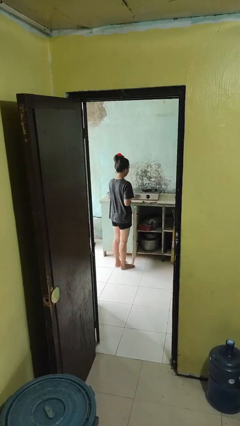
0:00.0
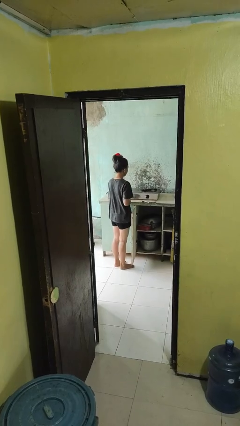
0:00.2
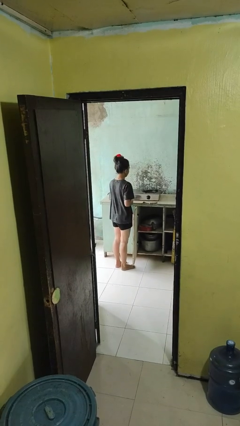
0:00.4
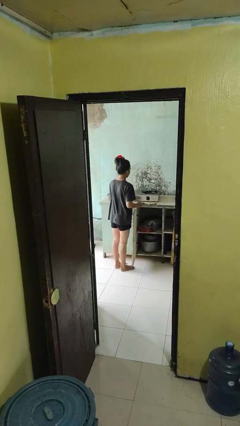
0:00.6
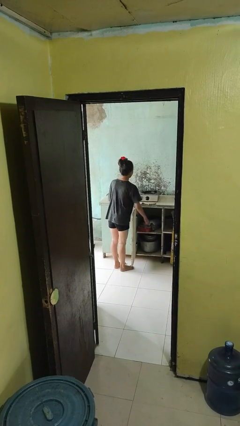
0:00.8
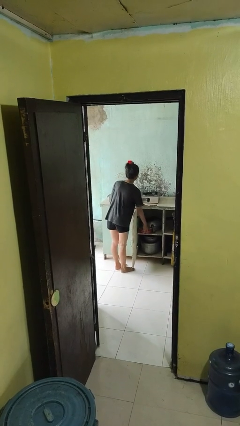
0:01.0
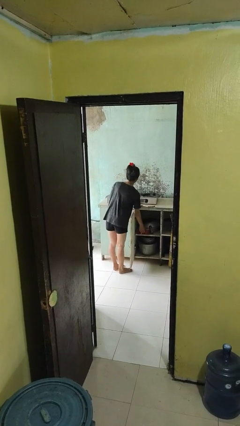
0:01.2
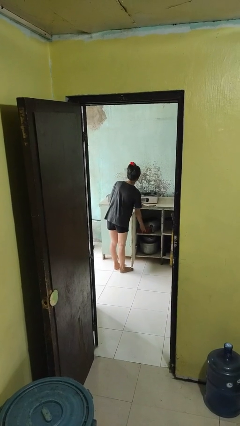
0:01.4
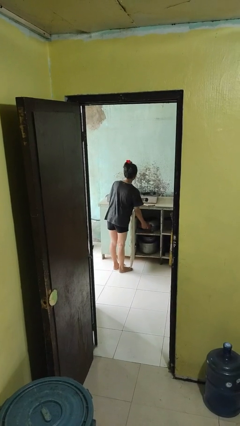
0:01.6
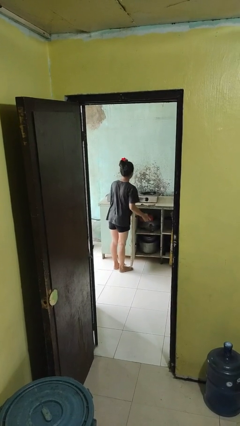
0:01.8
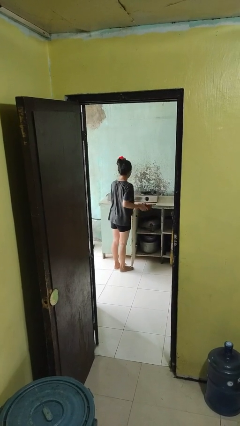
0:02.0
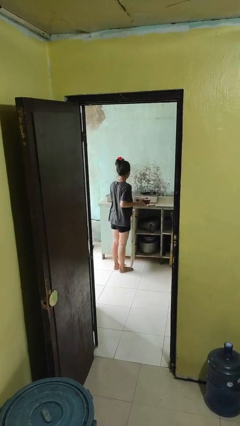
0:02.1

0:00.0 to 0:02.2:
person takes object from cabinet

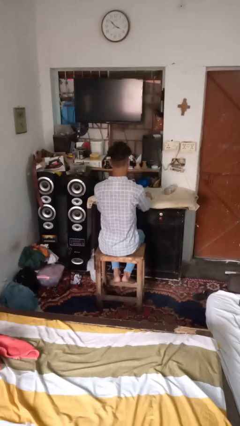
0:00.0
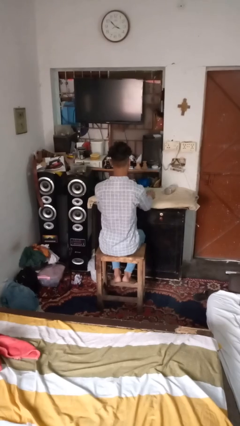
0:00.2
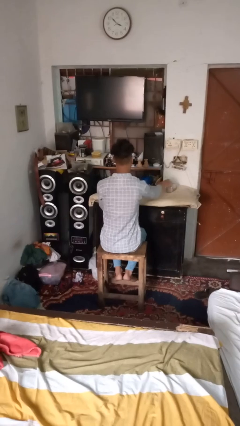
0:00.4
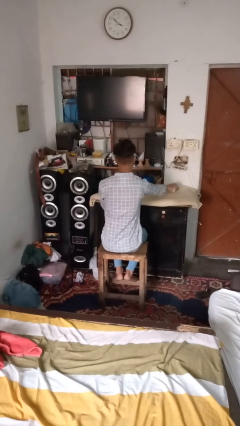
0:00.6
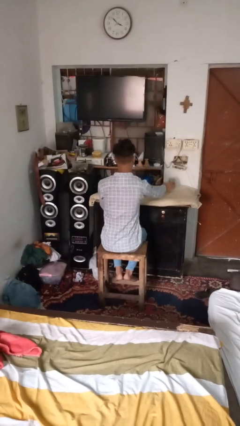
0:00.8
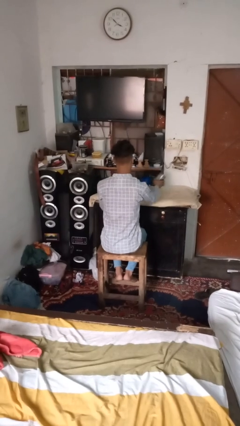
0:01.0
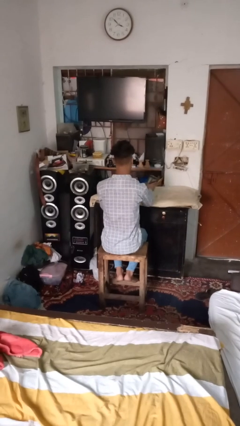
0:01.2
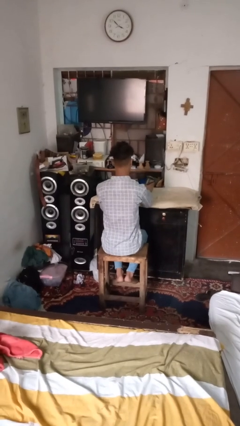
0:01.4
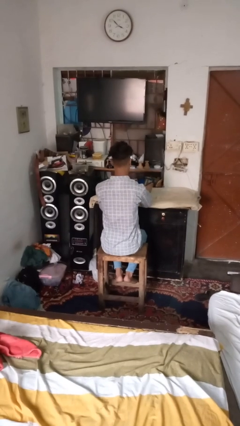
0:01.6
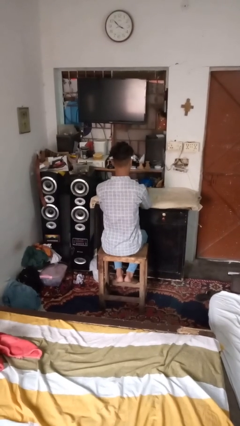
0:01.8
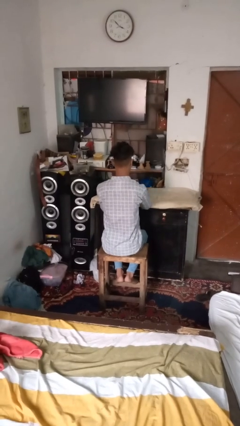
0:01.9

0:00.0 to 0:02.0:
person sets upright glass

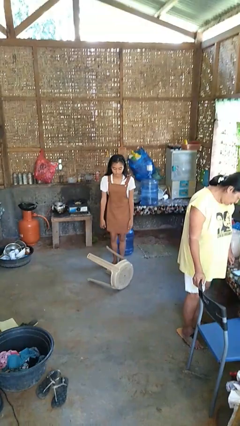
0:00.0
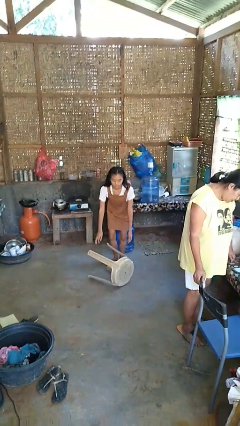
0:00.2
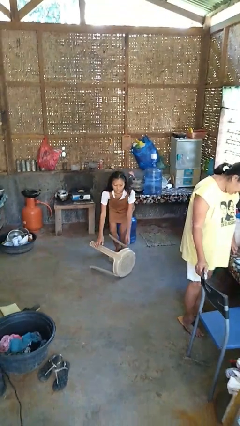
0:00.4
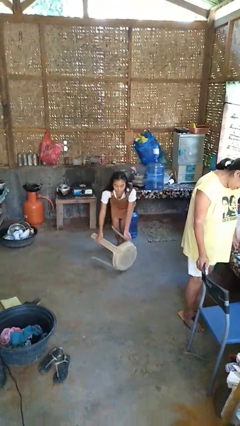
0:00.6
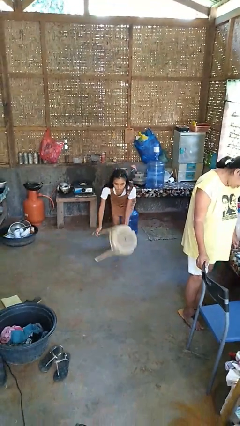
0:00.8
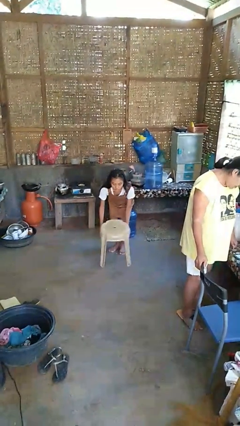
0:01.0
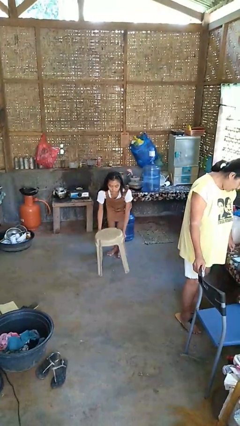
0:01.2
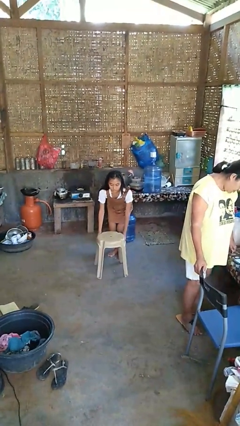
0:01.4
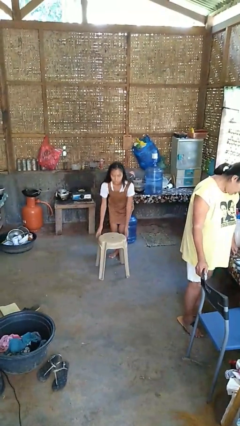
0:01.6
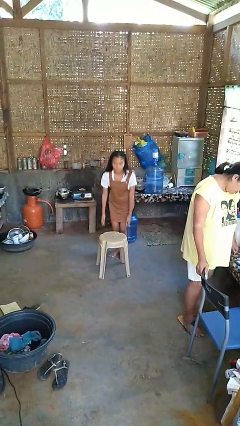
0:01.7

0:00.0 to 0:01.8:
person sets upright furniture

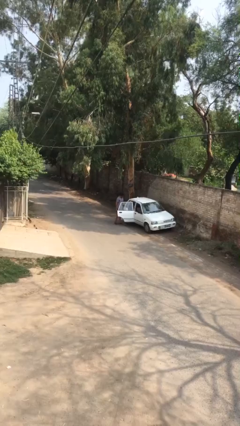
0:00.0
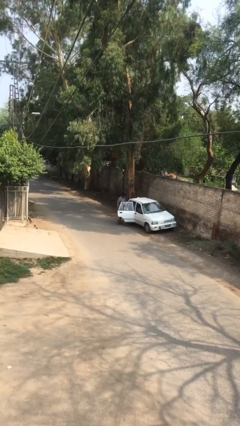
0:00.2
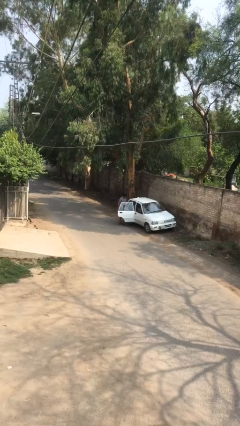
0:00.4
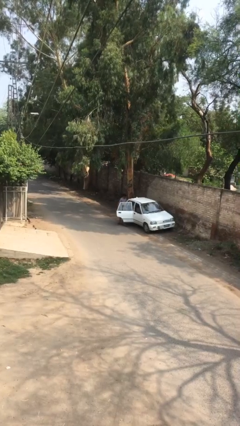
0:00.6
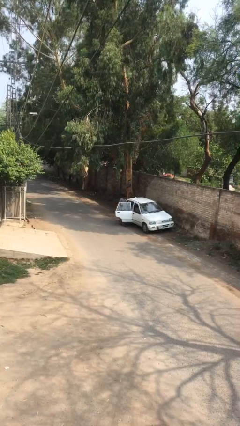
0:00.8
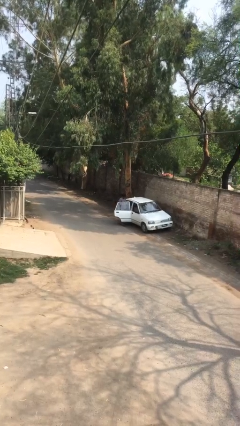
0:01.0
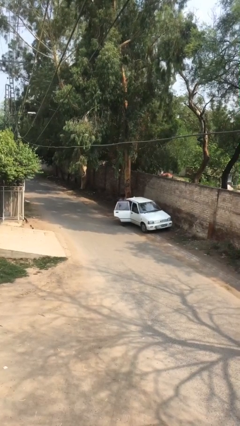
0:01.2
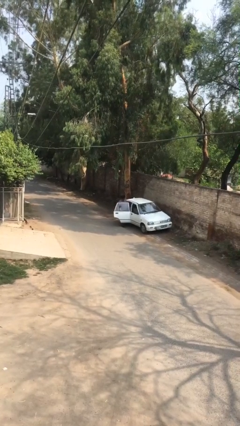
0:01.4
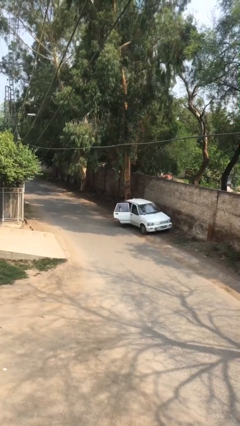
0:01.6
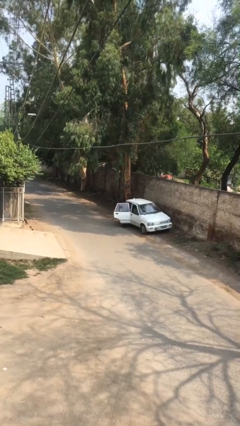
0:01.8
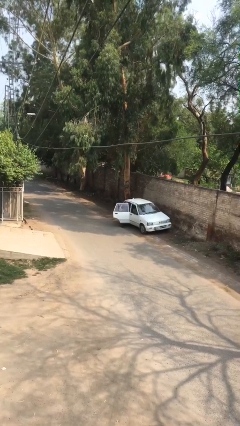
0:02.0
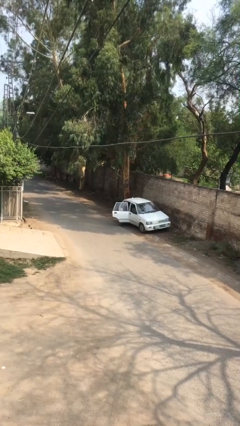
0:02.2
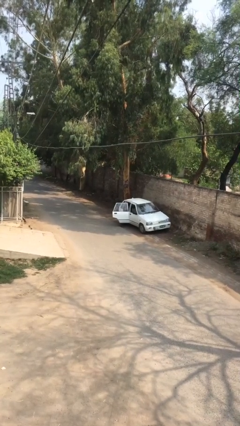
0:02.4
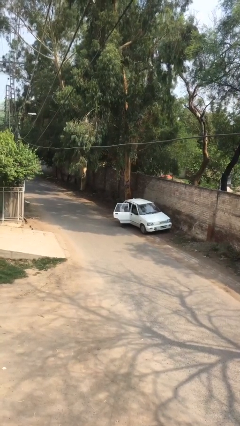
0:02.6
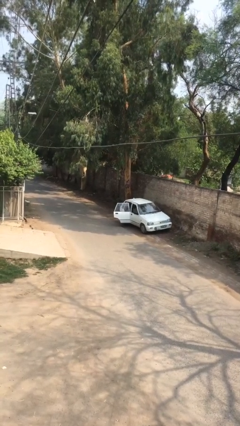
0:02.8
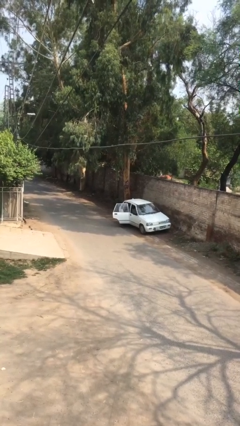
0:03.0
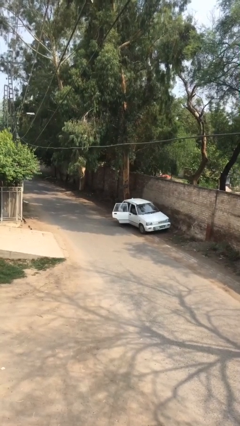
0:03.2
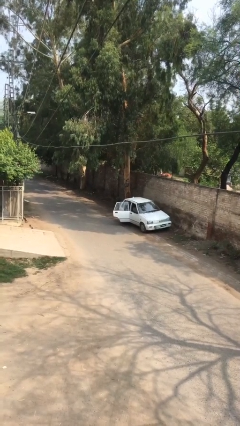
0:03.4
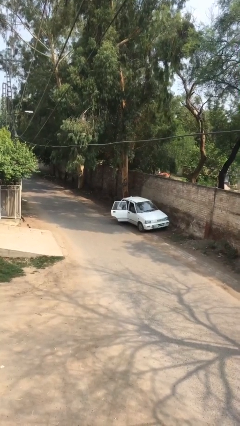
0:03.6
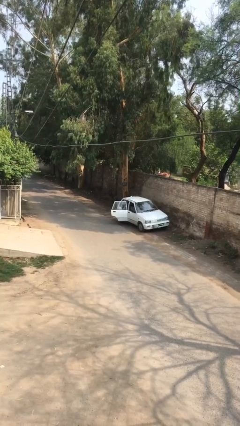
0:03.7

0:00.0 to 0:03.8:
person enters car

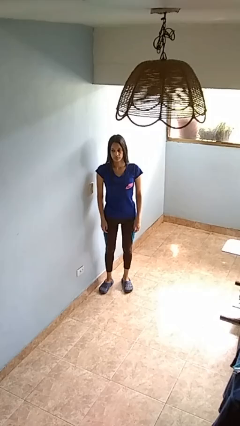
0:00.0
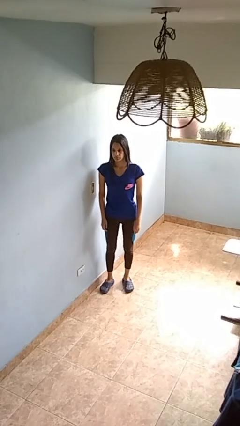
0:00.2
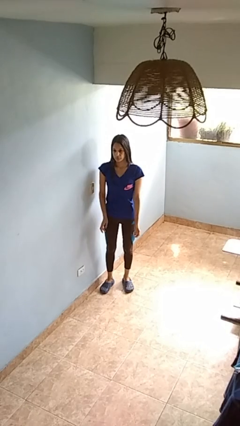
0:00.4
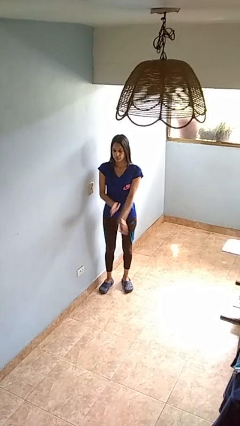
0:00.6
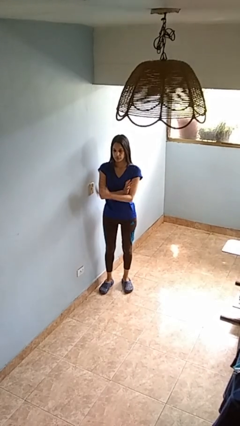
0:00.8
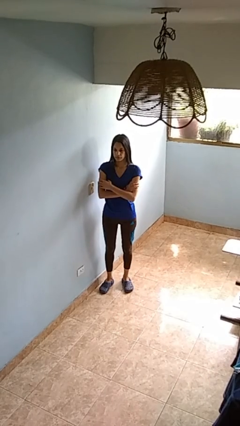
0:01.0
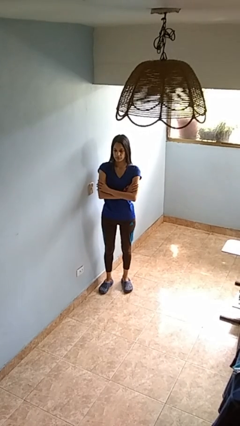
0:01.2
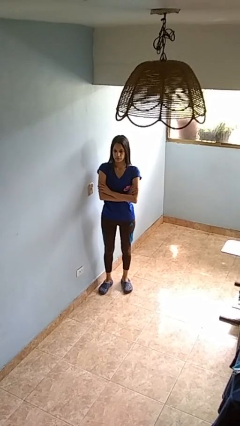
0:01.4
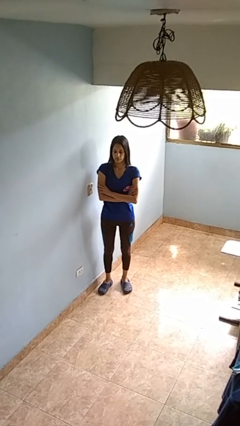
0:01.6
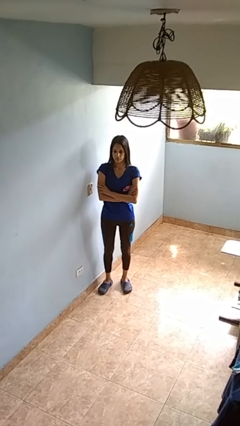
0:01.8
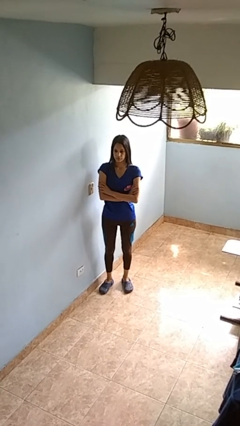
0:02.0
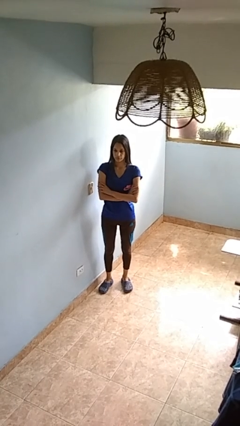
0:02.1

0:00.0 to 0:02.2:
person crosses arms

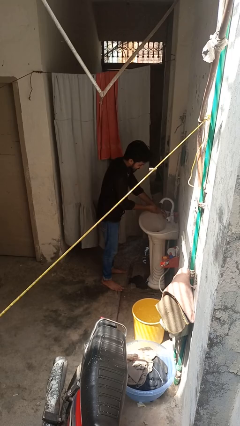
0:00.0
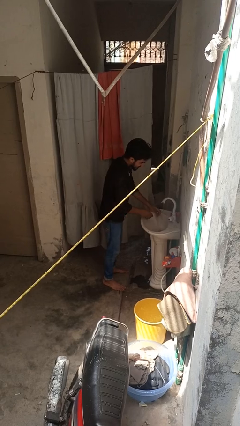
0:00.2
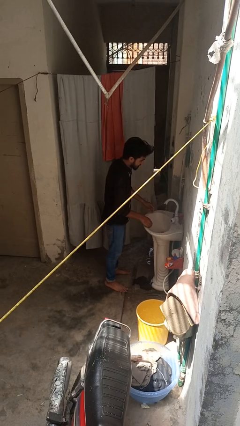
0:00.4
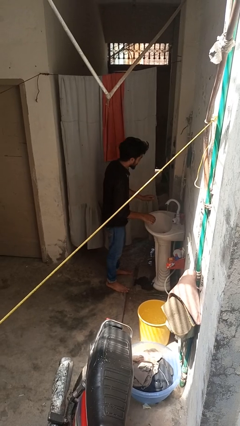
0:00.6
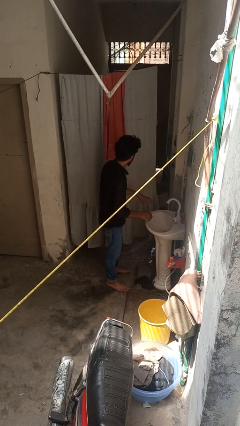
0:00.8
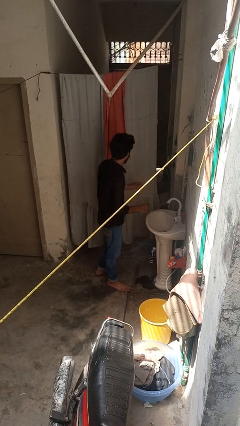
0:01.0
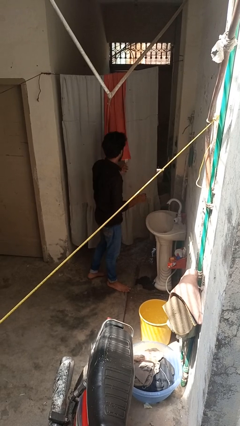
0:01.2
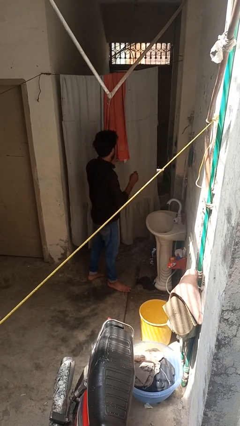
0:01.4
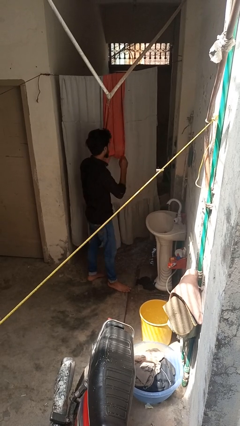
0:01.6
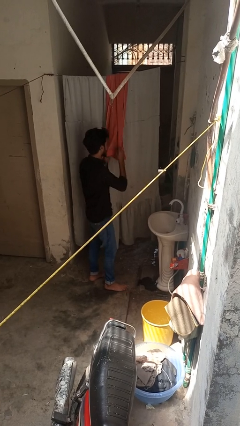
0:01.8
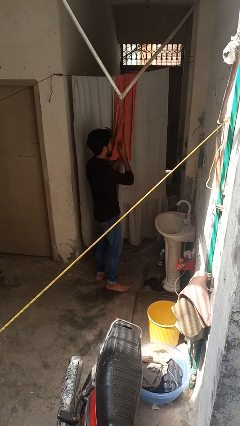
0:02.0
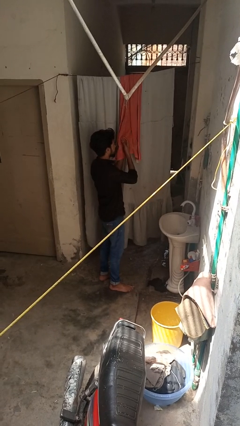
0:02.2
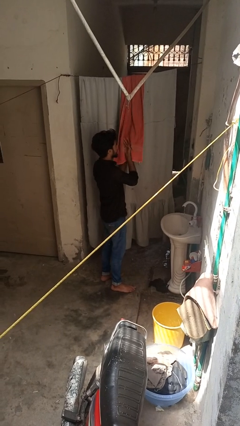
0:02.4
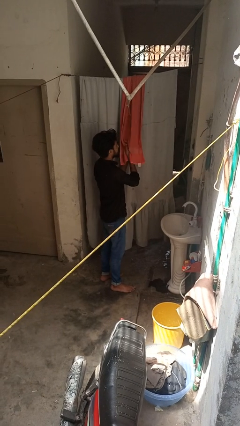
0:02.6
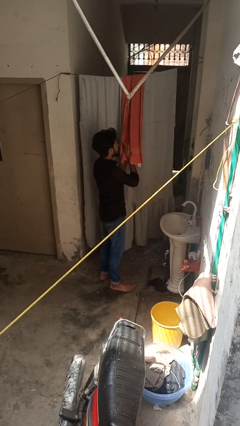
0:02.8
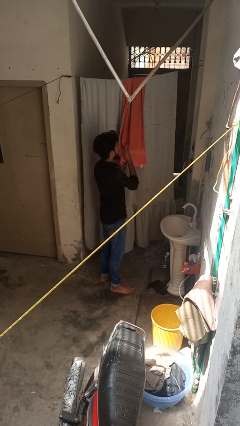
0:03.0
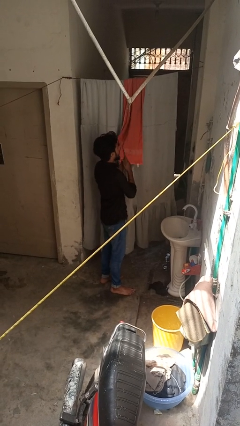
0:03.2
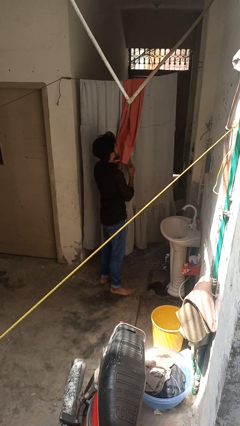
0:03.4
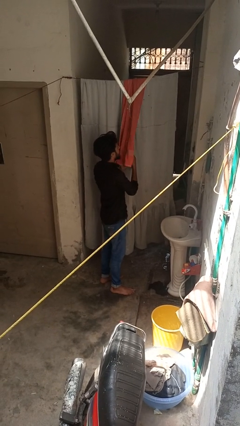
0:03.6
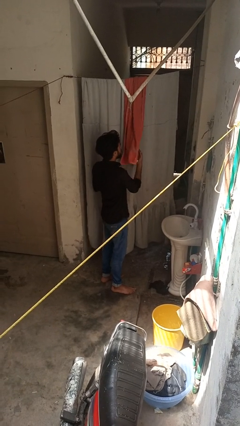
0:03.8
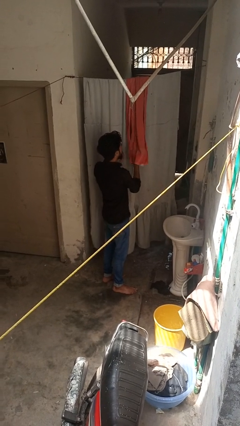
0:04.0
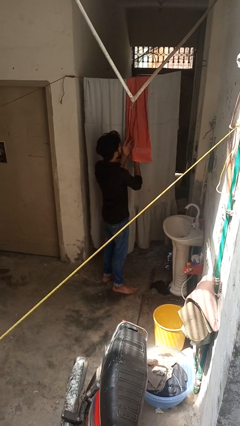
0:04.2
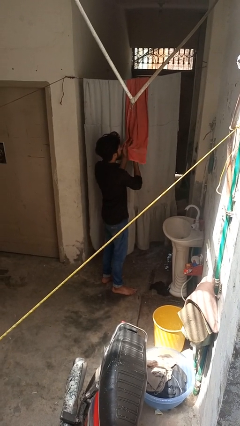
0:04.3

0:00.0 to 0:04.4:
person dries hands with towel

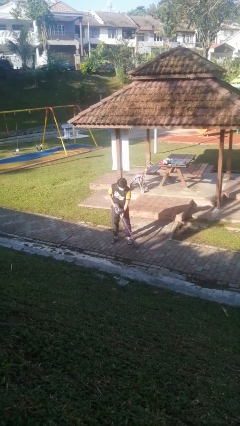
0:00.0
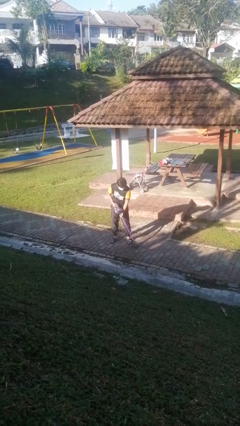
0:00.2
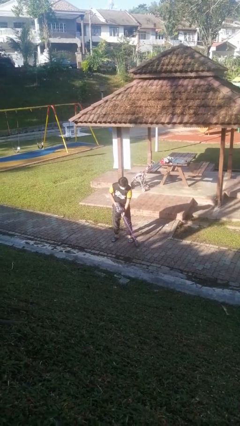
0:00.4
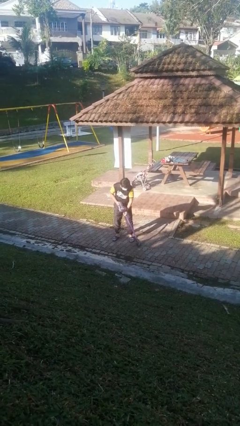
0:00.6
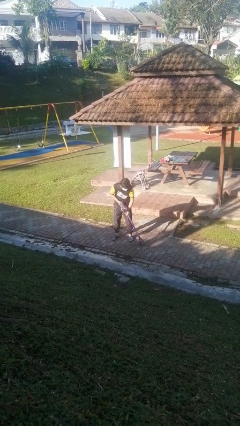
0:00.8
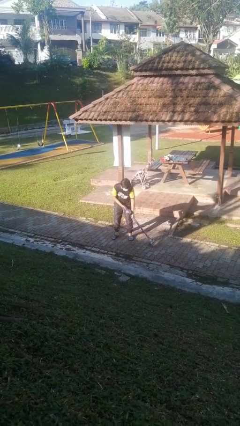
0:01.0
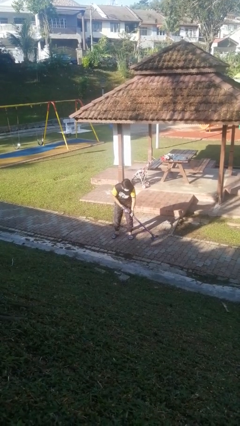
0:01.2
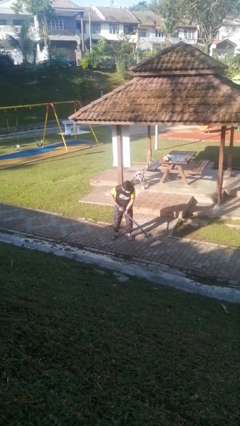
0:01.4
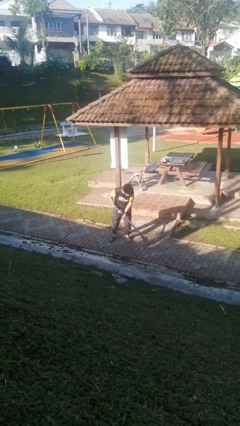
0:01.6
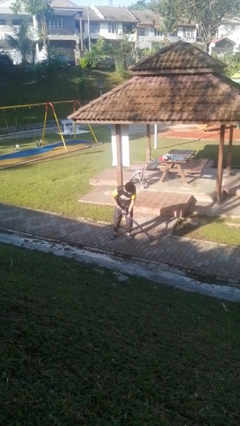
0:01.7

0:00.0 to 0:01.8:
person vacuums carpet
